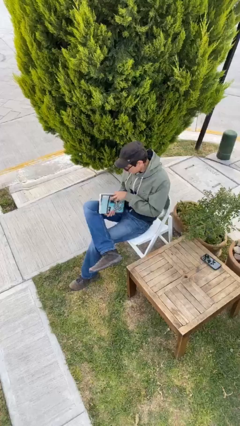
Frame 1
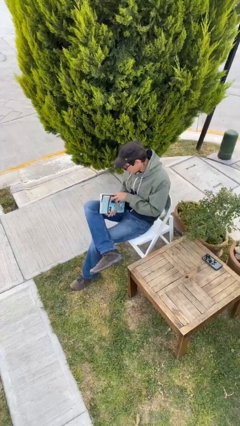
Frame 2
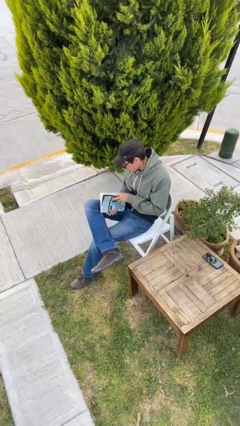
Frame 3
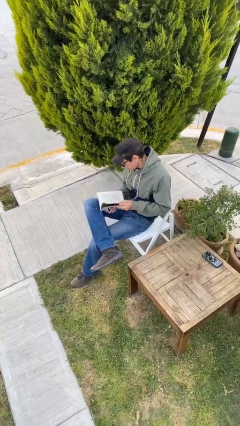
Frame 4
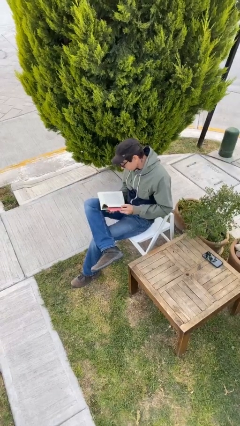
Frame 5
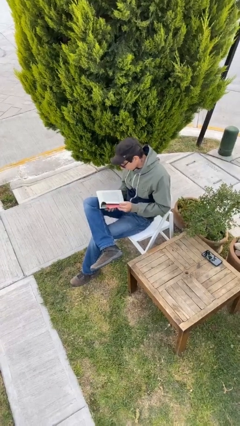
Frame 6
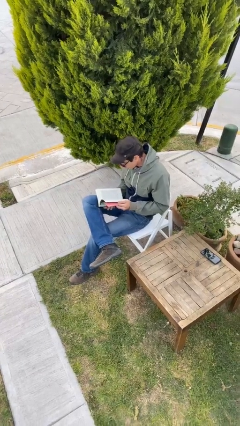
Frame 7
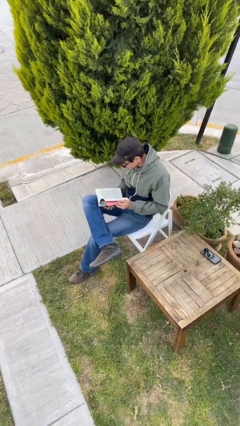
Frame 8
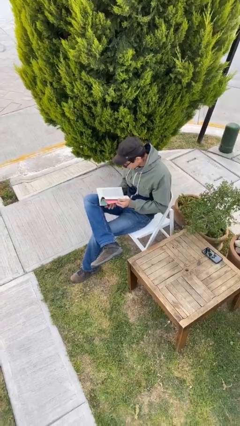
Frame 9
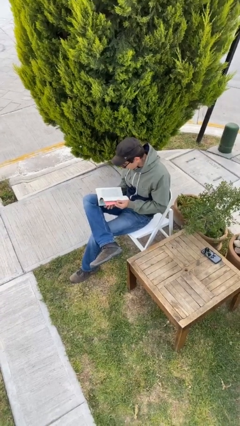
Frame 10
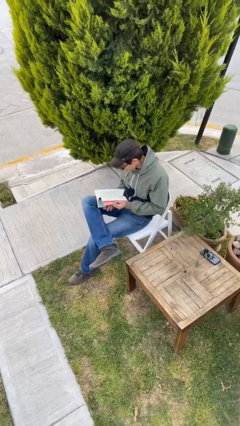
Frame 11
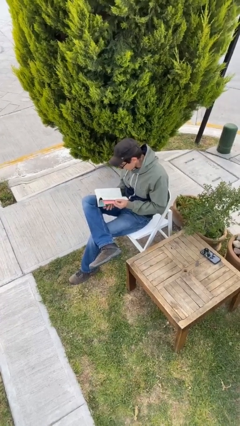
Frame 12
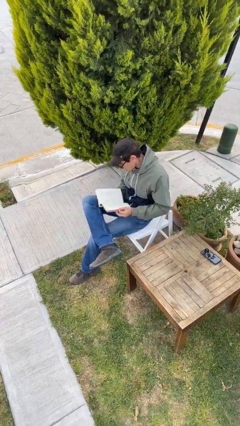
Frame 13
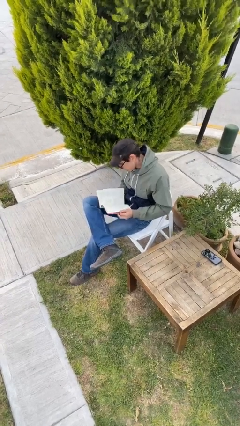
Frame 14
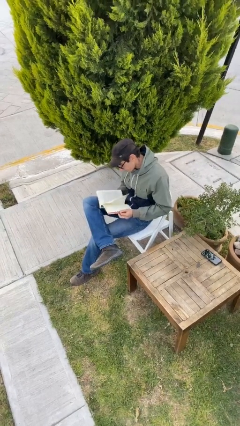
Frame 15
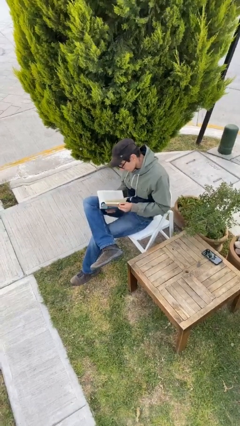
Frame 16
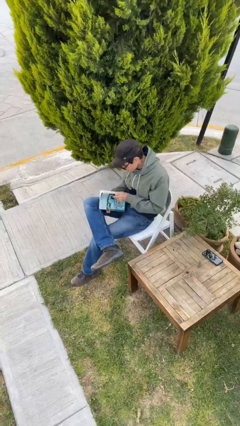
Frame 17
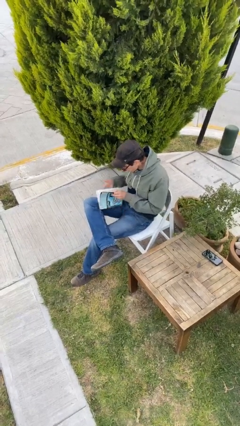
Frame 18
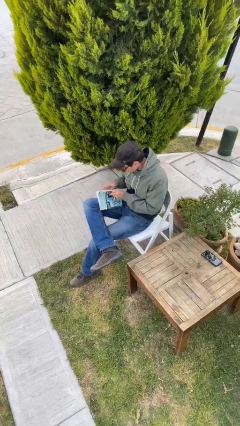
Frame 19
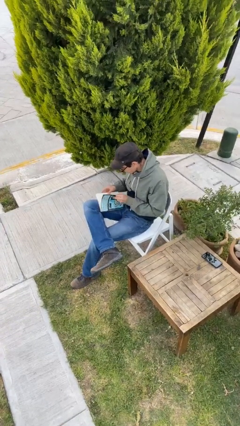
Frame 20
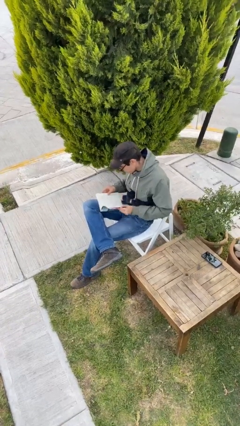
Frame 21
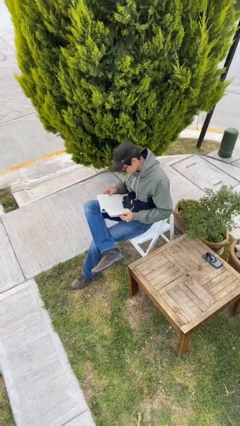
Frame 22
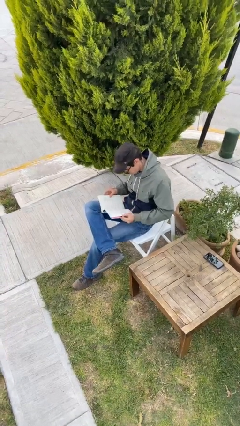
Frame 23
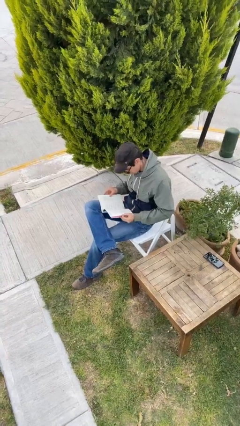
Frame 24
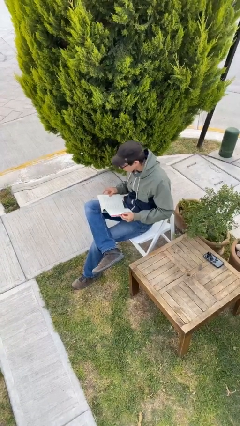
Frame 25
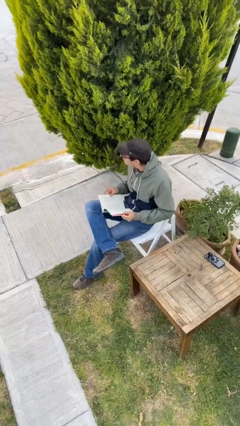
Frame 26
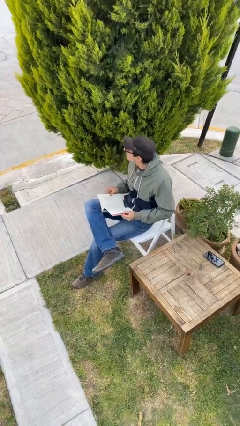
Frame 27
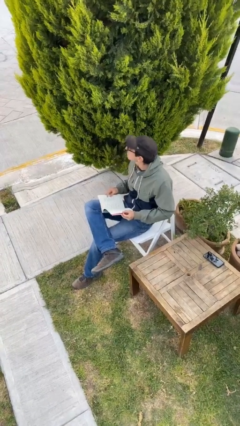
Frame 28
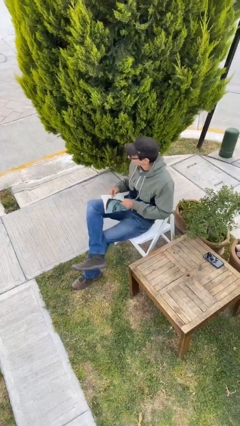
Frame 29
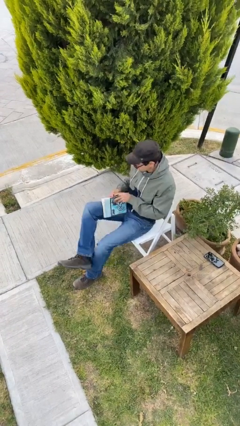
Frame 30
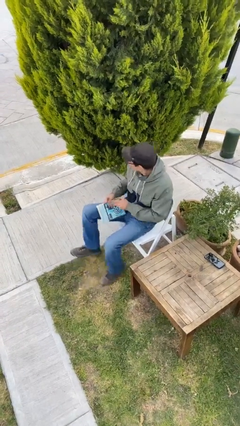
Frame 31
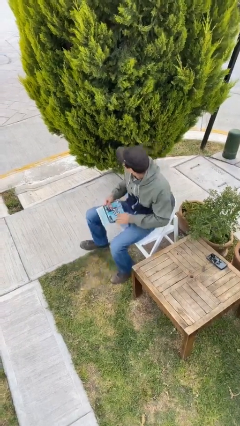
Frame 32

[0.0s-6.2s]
person reads document

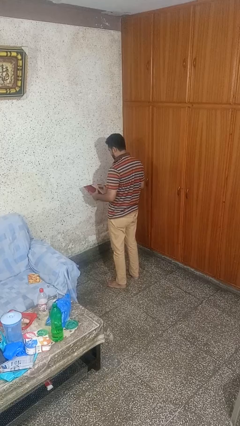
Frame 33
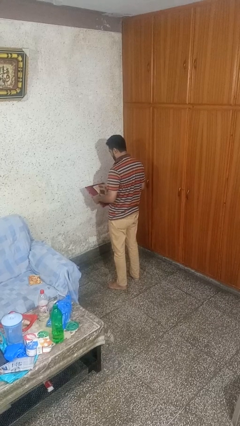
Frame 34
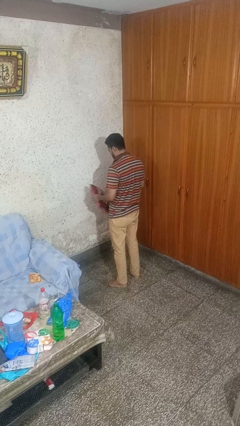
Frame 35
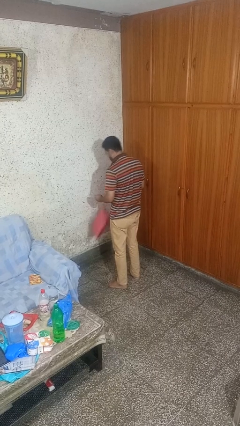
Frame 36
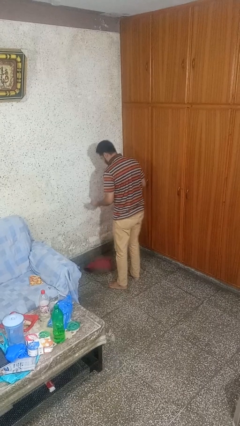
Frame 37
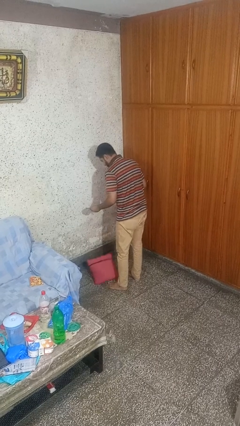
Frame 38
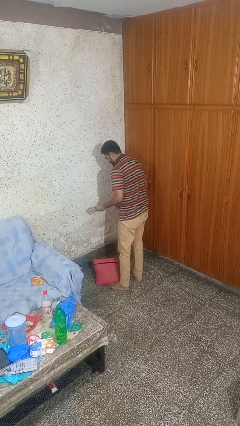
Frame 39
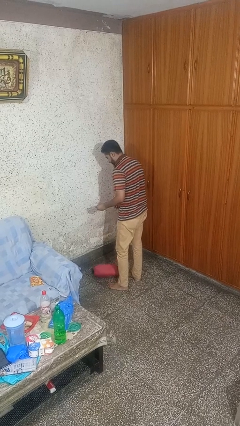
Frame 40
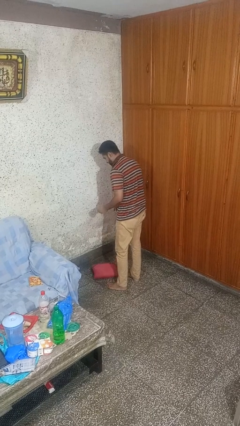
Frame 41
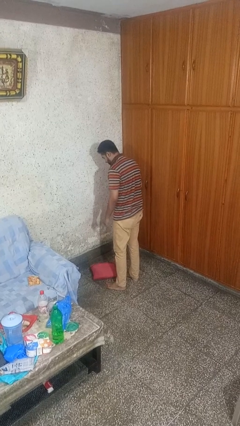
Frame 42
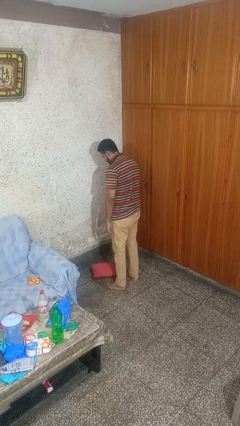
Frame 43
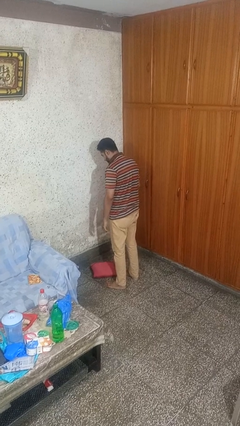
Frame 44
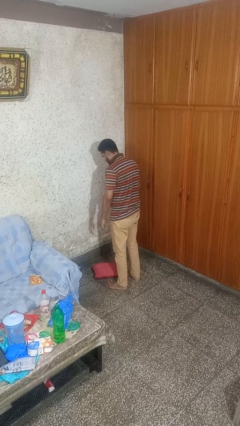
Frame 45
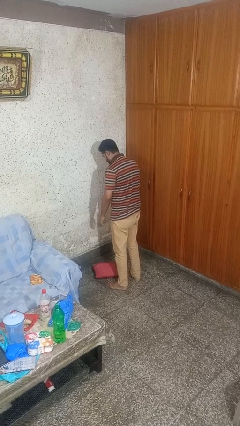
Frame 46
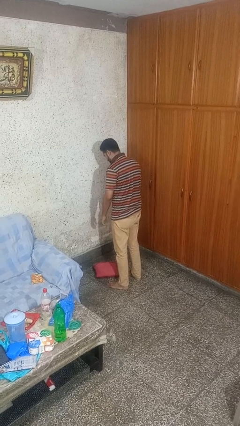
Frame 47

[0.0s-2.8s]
person drops object

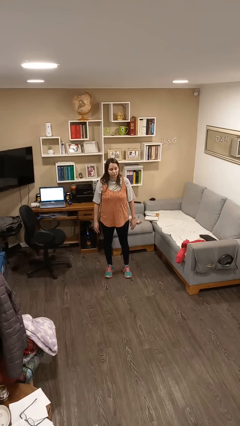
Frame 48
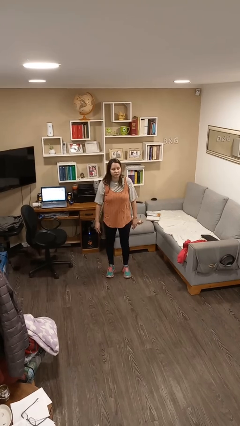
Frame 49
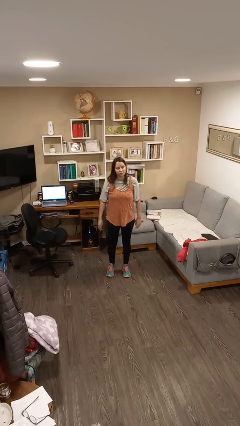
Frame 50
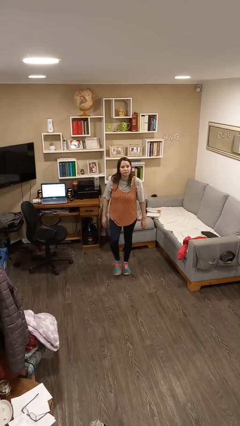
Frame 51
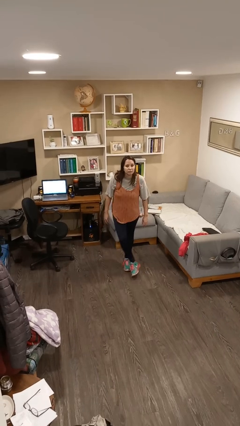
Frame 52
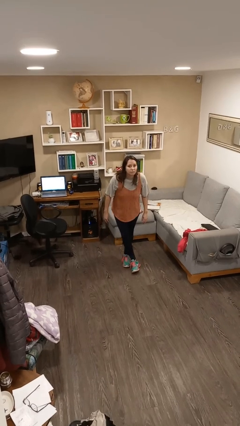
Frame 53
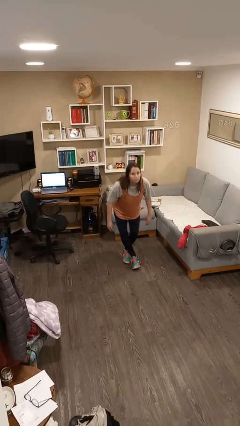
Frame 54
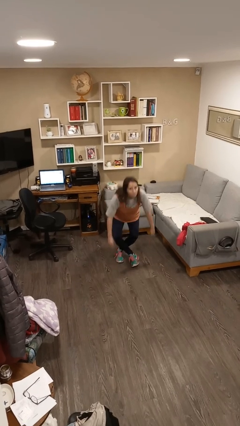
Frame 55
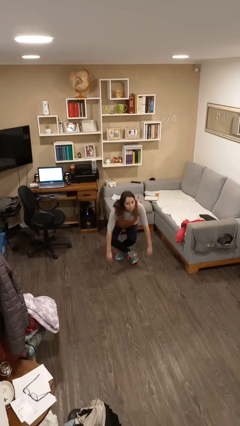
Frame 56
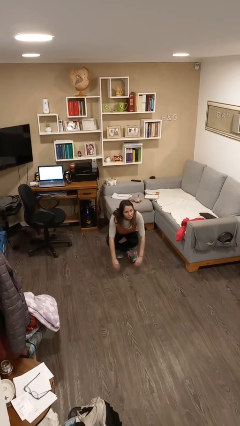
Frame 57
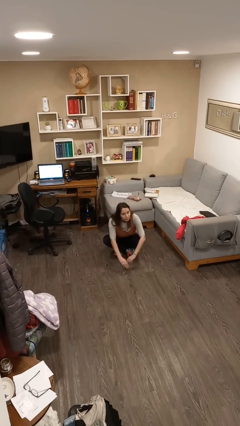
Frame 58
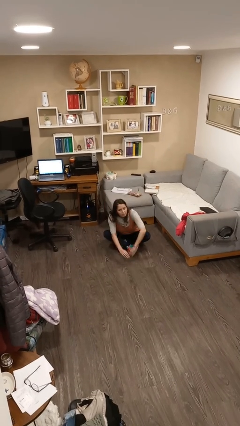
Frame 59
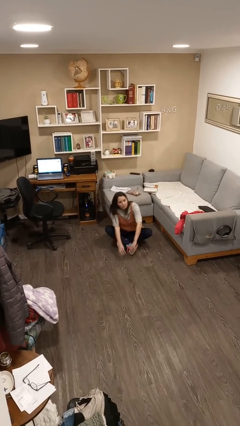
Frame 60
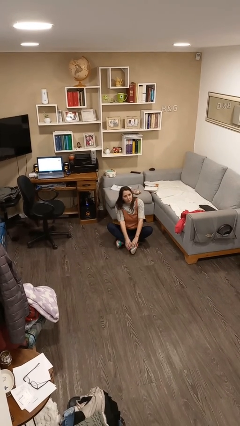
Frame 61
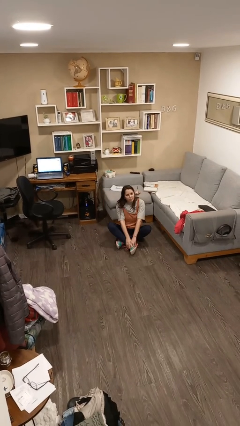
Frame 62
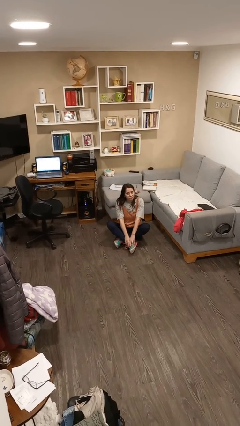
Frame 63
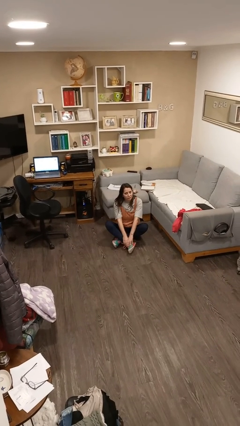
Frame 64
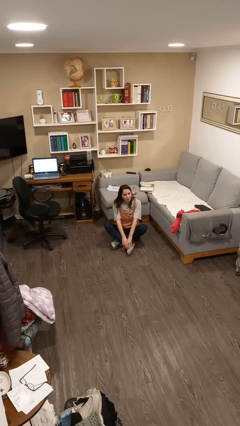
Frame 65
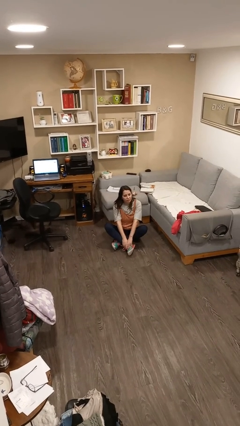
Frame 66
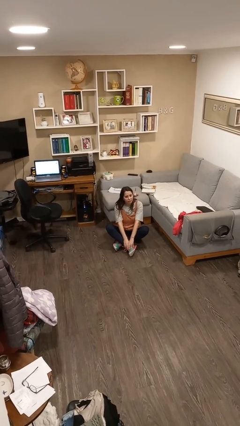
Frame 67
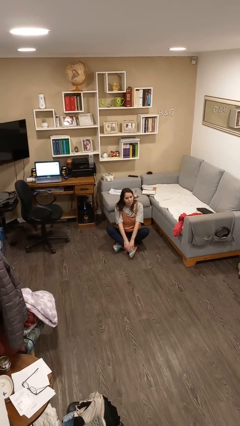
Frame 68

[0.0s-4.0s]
person sits crisscross

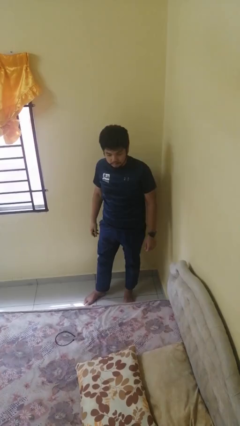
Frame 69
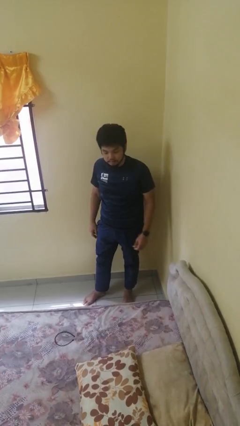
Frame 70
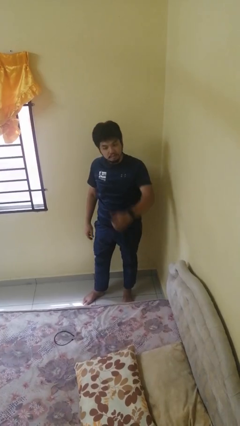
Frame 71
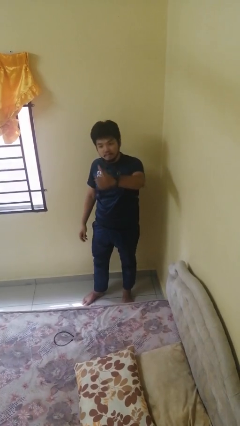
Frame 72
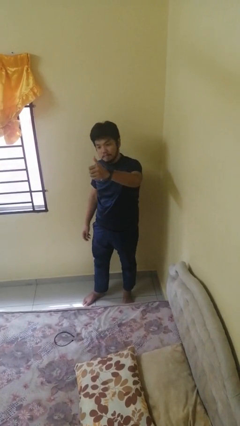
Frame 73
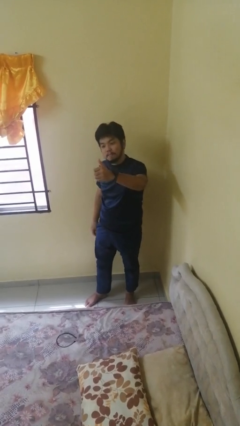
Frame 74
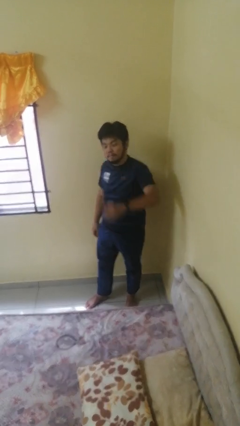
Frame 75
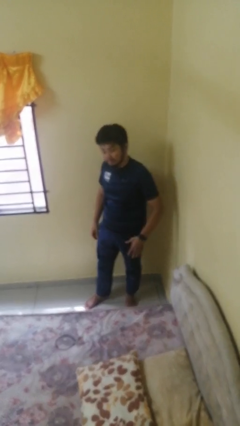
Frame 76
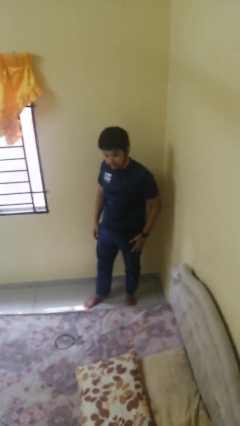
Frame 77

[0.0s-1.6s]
person gestures thumbs up

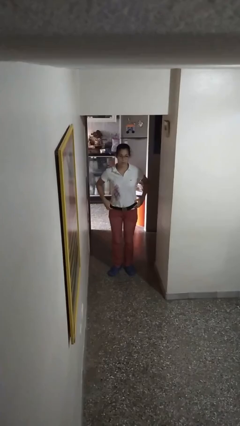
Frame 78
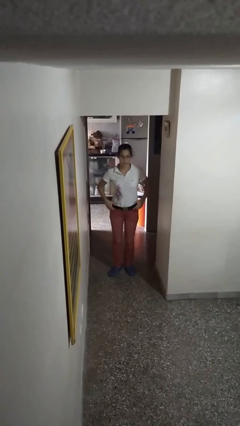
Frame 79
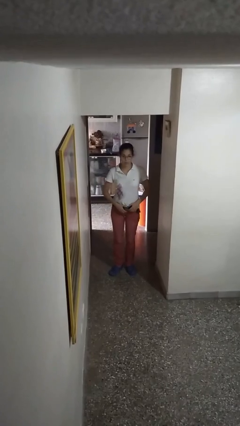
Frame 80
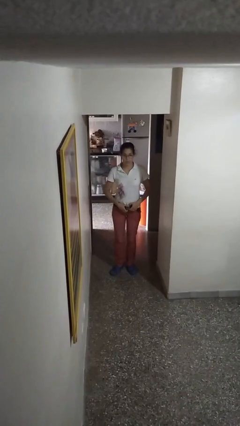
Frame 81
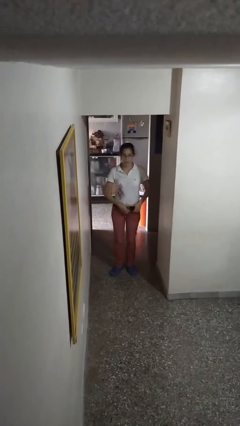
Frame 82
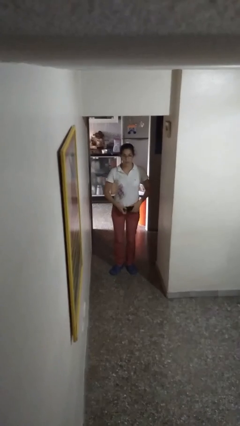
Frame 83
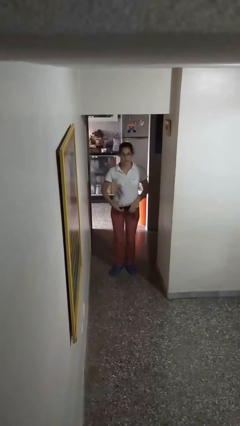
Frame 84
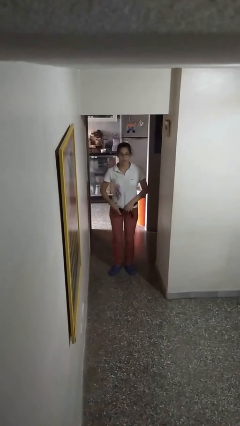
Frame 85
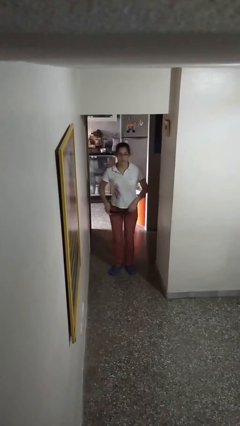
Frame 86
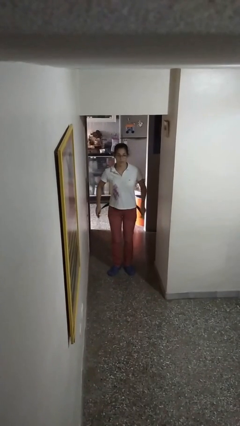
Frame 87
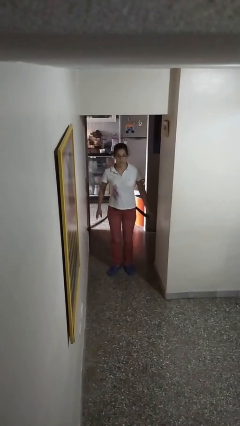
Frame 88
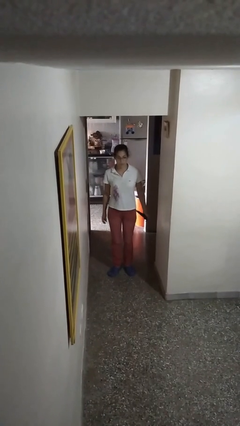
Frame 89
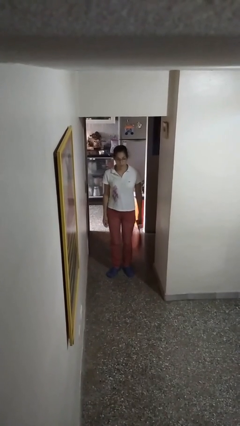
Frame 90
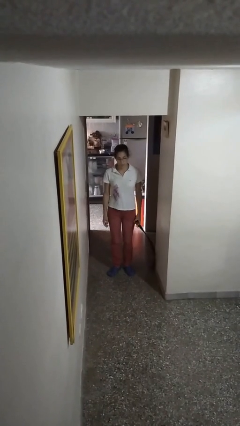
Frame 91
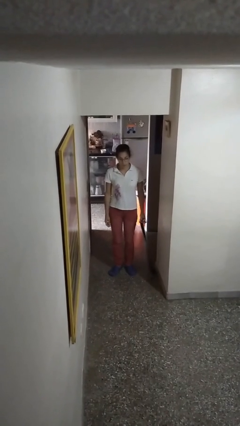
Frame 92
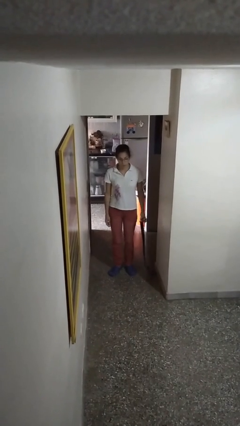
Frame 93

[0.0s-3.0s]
person takes off belt

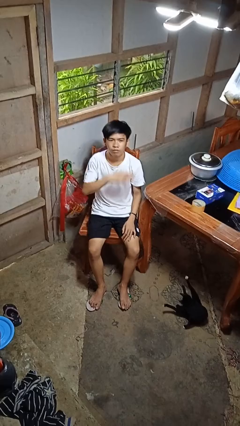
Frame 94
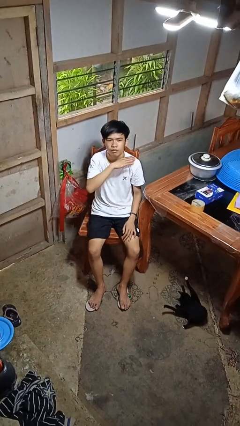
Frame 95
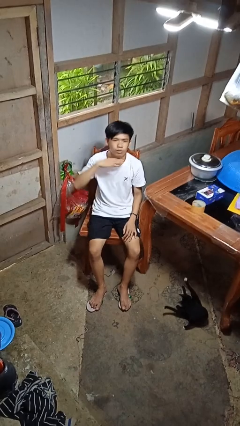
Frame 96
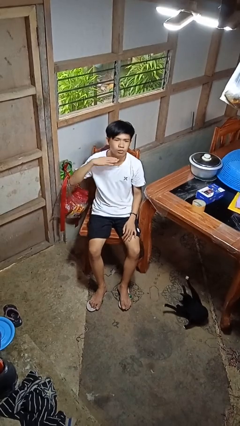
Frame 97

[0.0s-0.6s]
person gestures cut
